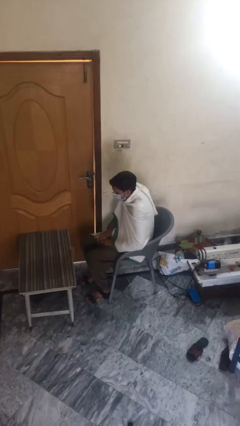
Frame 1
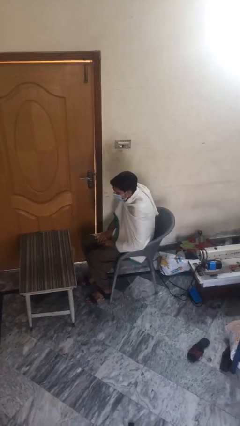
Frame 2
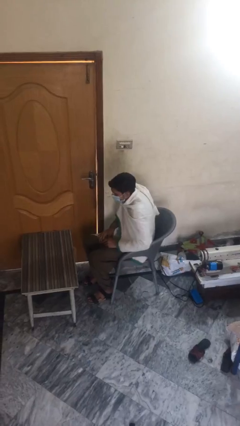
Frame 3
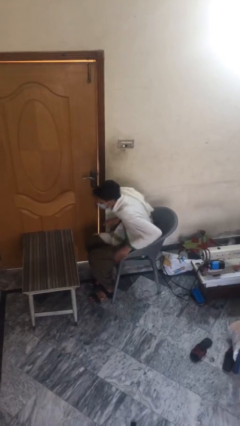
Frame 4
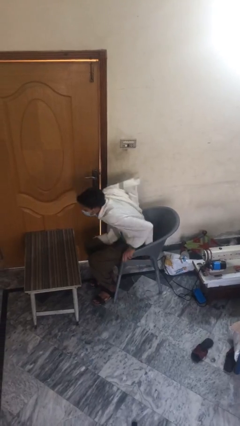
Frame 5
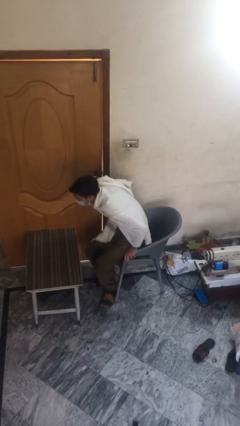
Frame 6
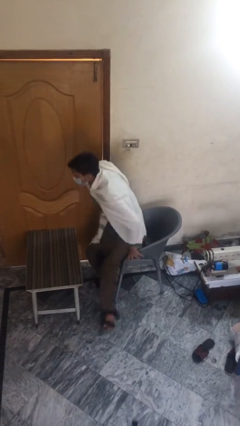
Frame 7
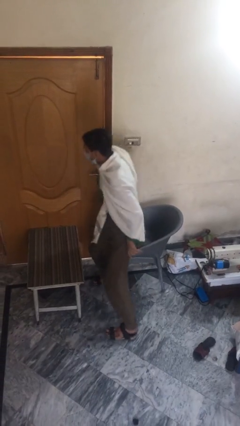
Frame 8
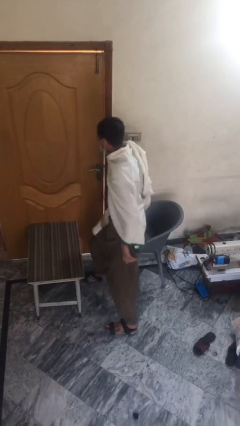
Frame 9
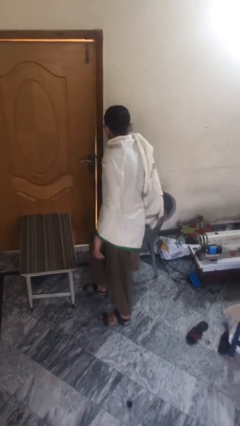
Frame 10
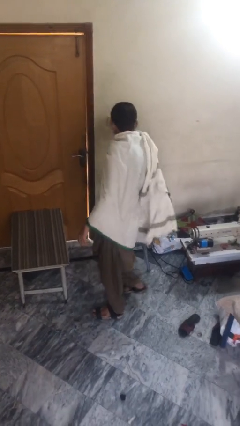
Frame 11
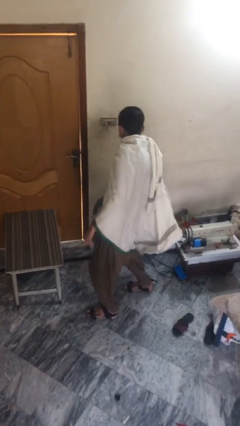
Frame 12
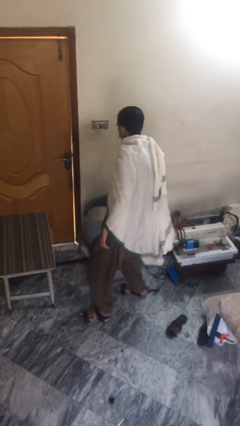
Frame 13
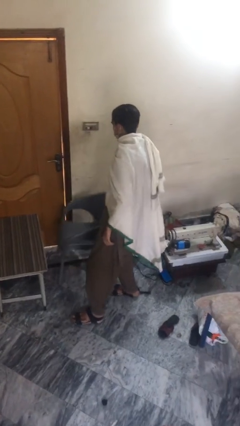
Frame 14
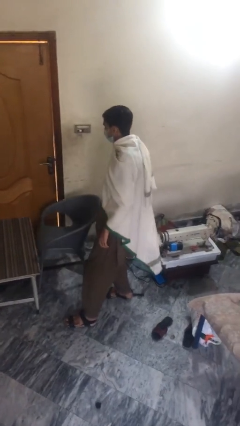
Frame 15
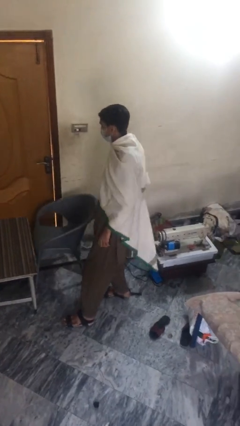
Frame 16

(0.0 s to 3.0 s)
person stands up

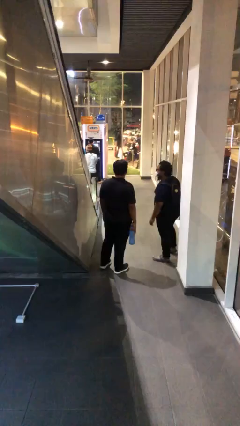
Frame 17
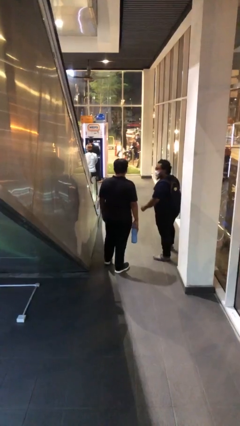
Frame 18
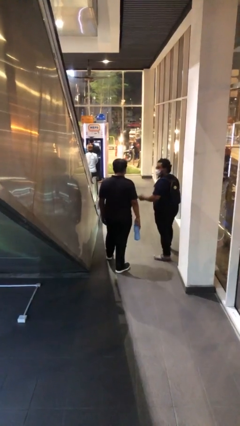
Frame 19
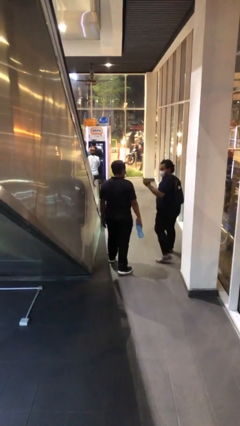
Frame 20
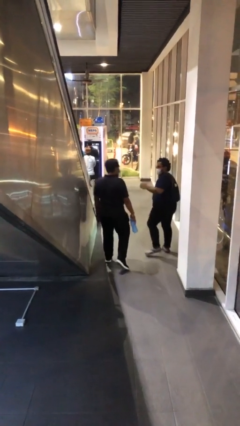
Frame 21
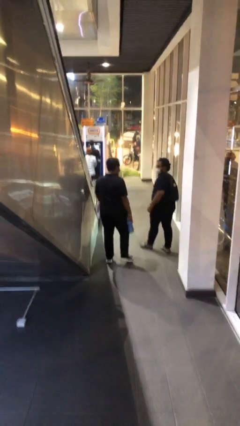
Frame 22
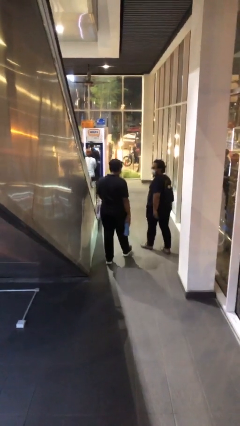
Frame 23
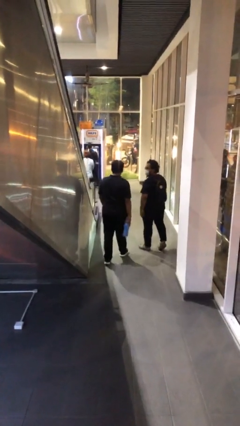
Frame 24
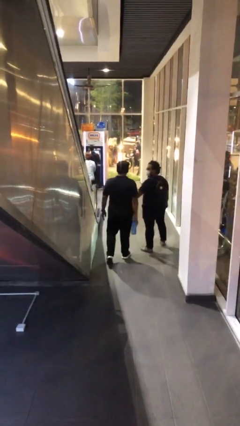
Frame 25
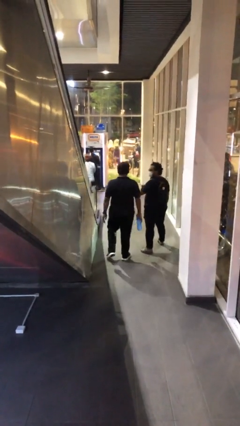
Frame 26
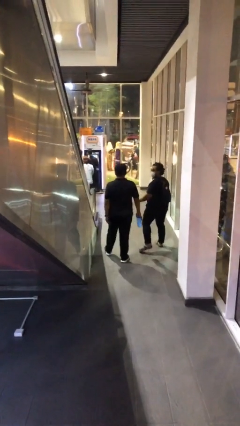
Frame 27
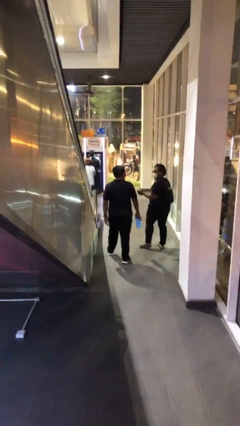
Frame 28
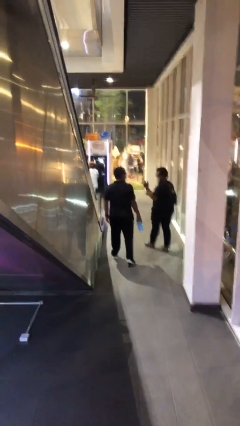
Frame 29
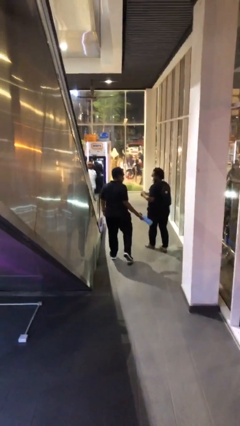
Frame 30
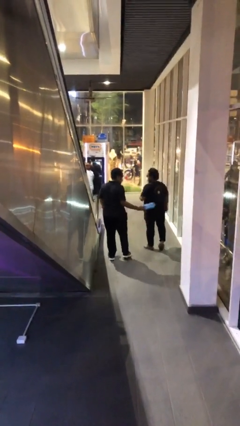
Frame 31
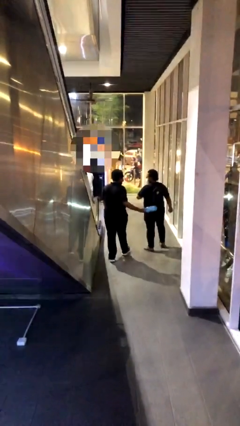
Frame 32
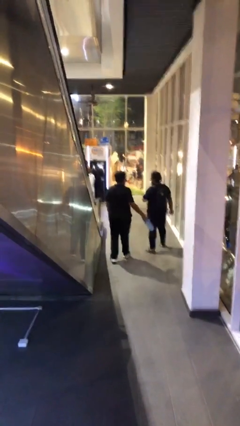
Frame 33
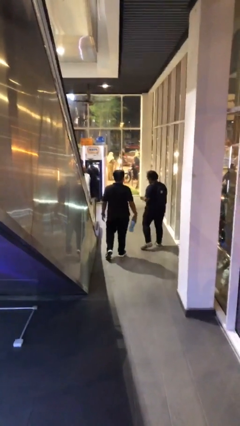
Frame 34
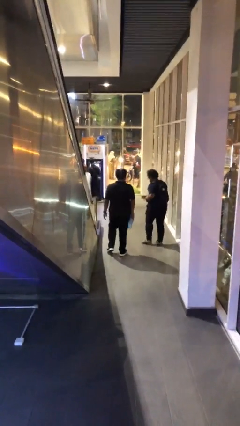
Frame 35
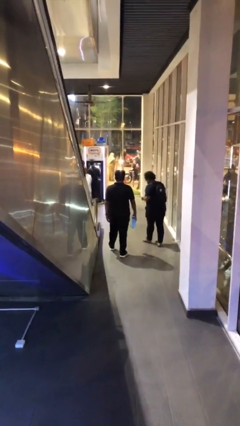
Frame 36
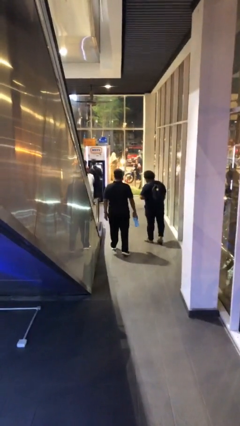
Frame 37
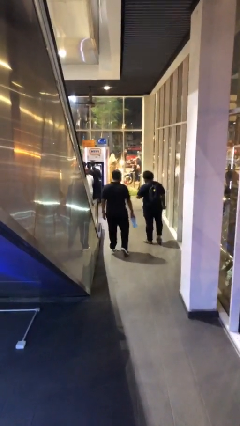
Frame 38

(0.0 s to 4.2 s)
person talks to person

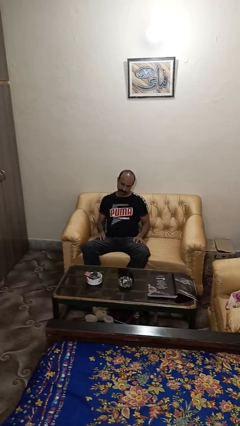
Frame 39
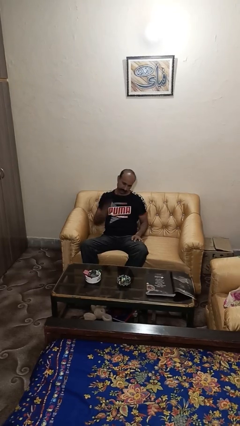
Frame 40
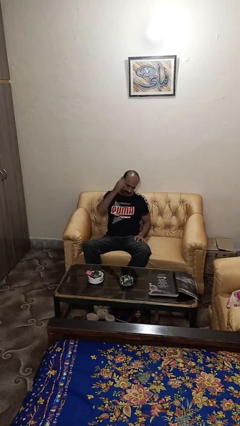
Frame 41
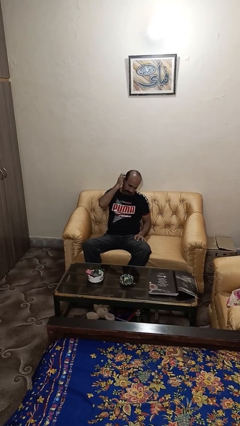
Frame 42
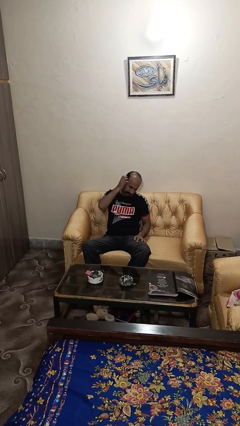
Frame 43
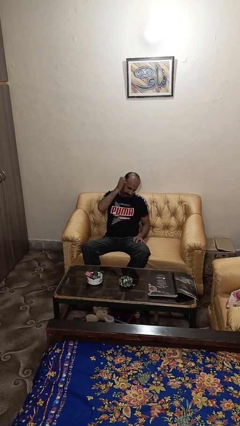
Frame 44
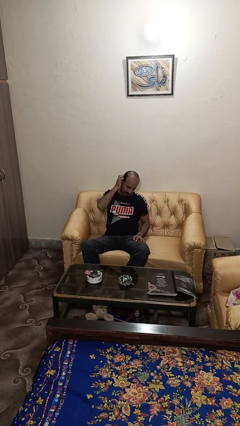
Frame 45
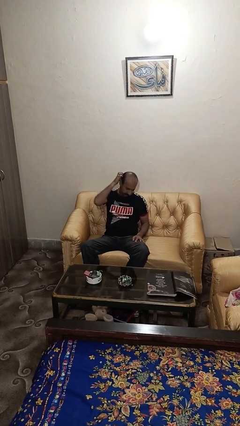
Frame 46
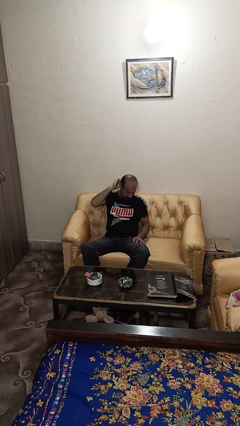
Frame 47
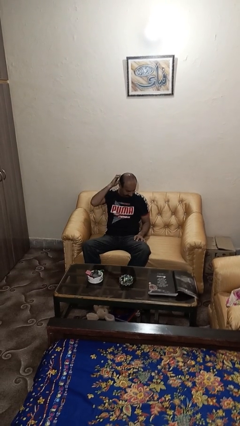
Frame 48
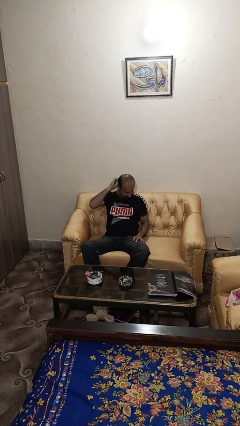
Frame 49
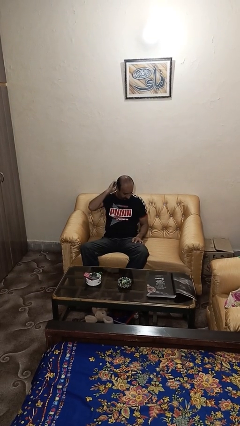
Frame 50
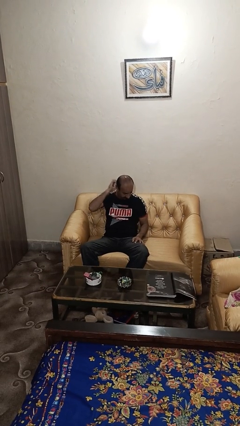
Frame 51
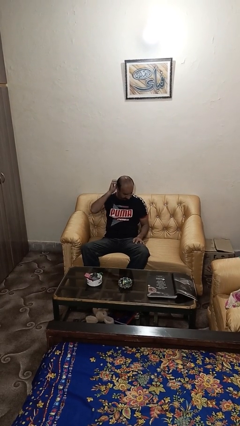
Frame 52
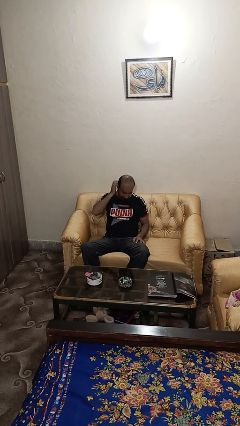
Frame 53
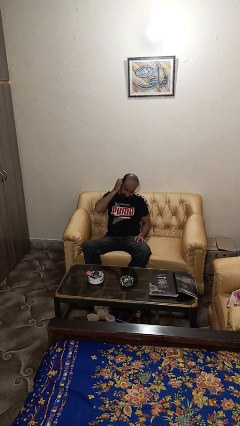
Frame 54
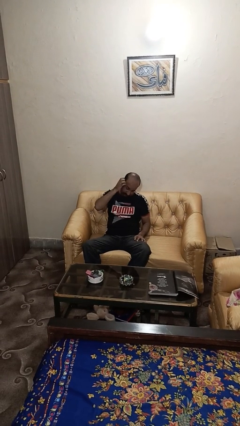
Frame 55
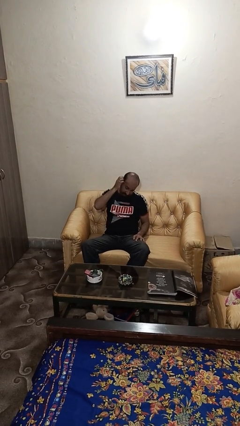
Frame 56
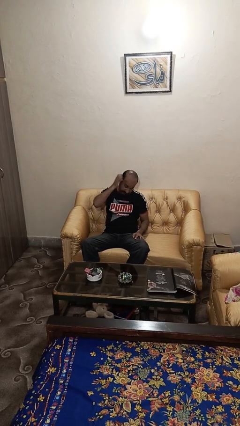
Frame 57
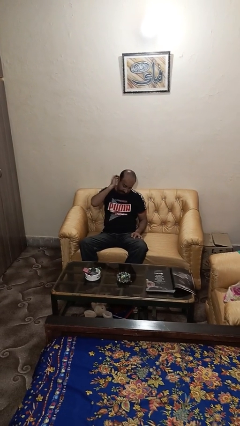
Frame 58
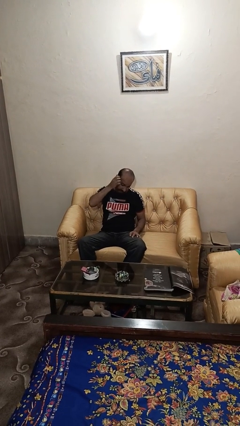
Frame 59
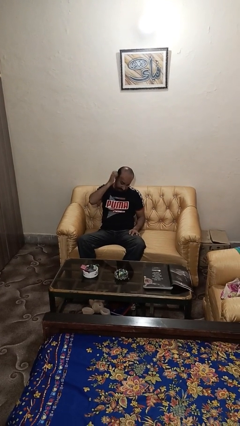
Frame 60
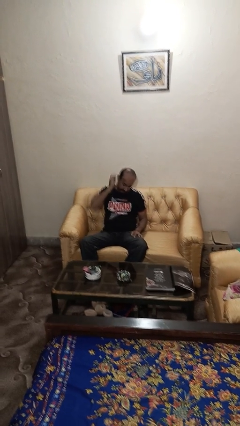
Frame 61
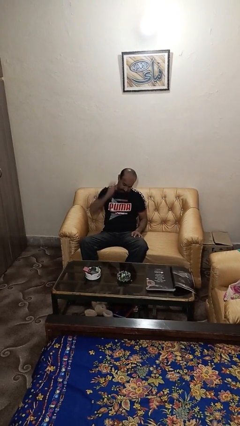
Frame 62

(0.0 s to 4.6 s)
person strokes hair

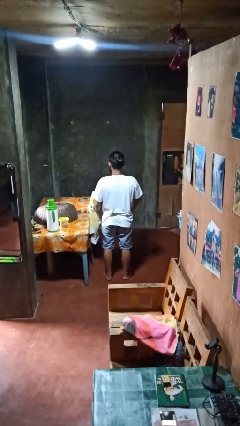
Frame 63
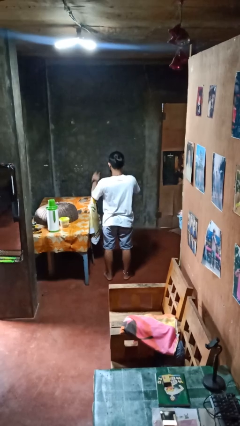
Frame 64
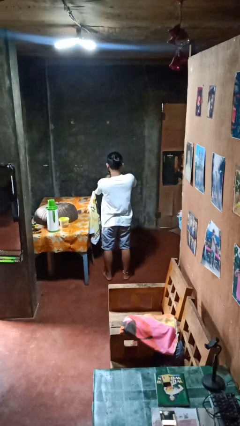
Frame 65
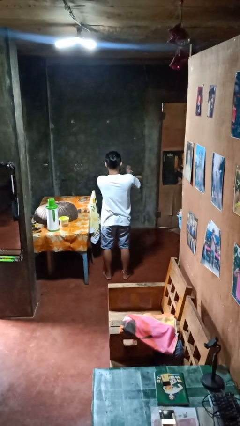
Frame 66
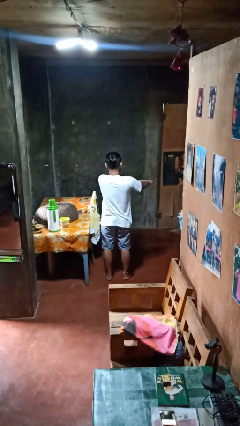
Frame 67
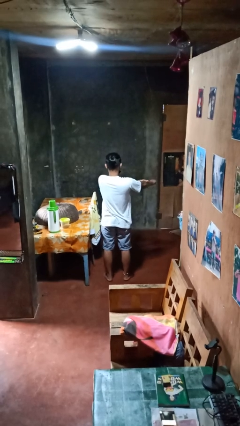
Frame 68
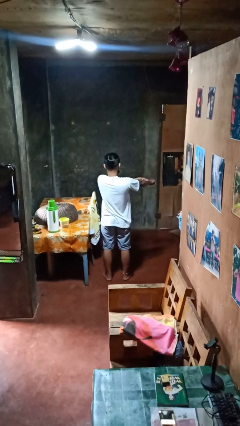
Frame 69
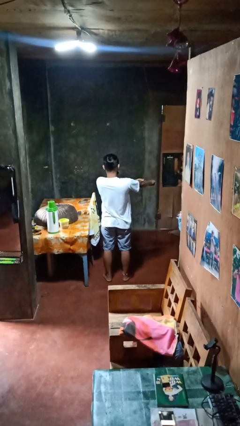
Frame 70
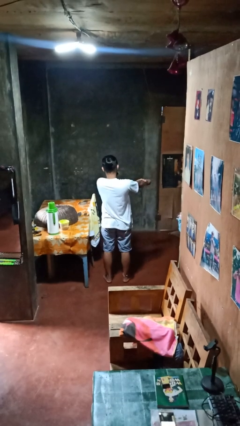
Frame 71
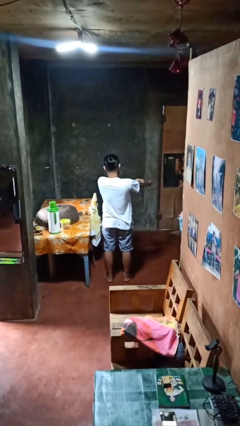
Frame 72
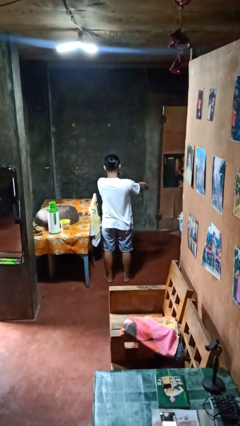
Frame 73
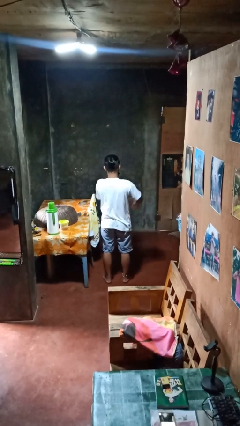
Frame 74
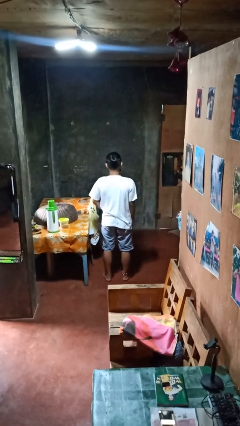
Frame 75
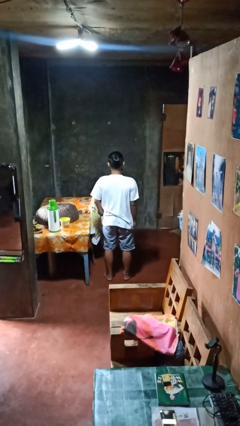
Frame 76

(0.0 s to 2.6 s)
person swats bug

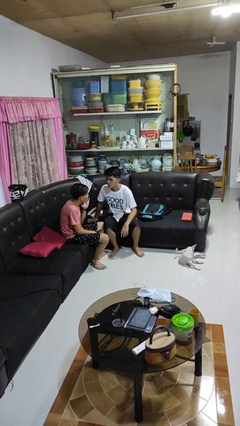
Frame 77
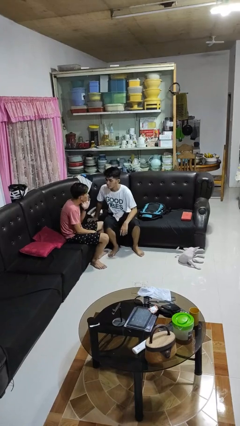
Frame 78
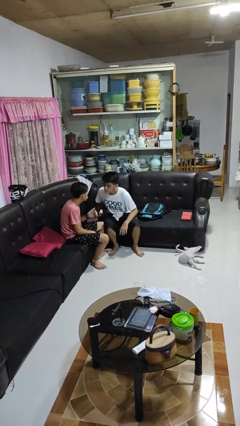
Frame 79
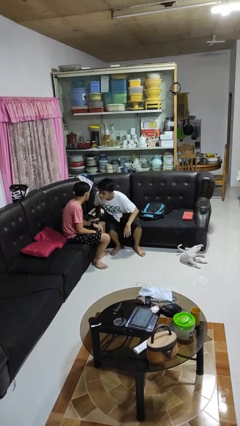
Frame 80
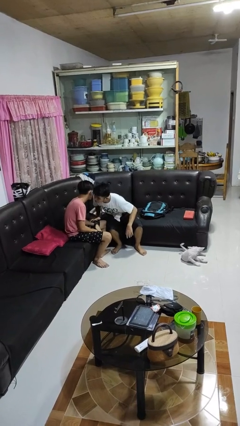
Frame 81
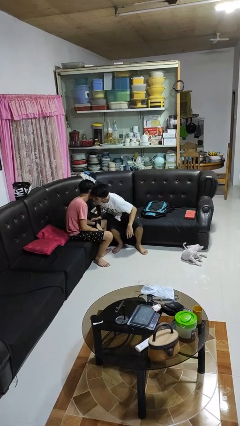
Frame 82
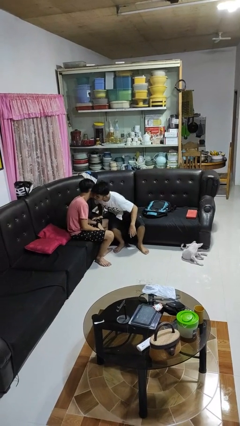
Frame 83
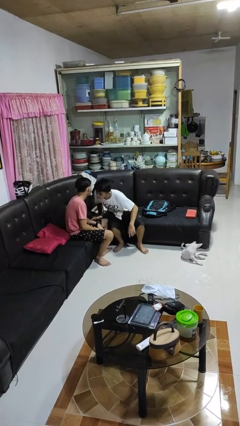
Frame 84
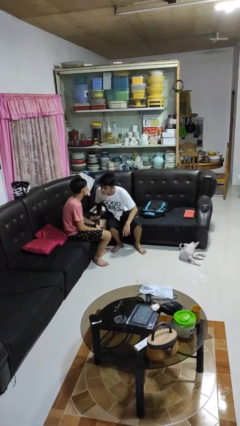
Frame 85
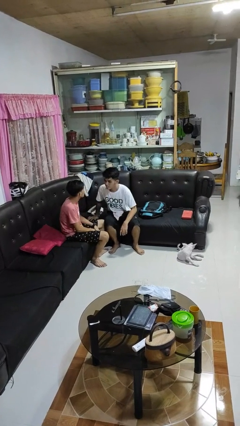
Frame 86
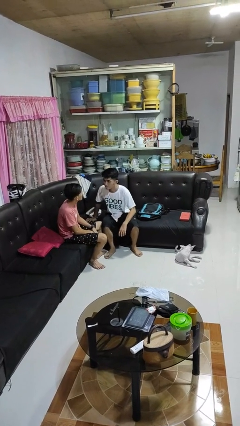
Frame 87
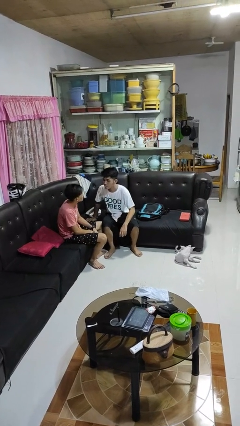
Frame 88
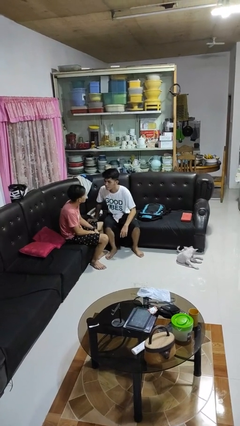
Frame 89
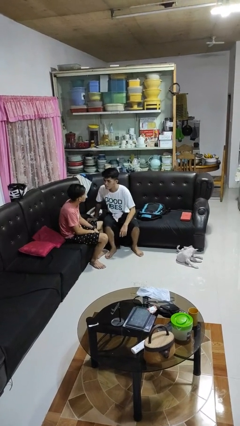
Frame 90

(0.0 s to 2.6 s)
person kisses cheek of person

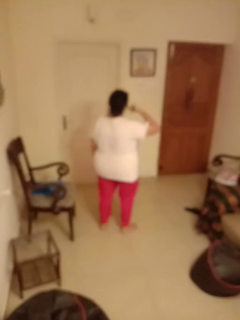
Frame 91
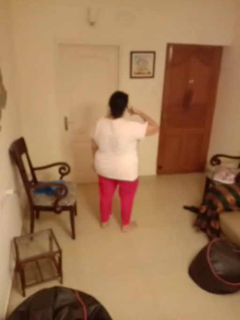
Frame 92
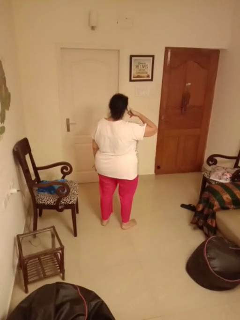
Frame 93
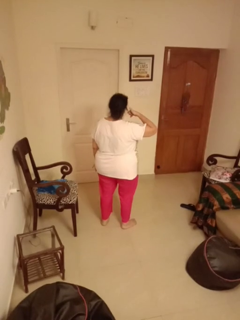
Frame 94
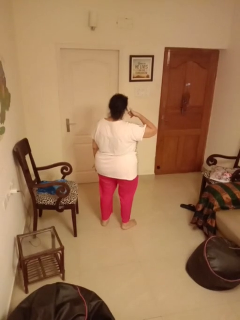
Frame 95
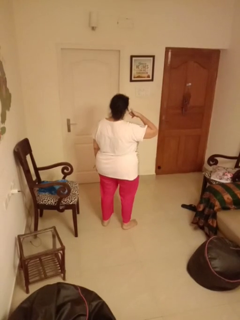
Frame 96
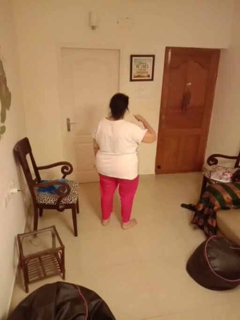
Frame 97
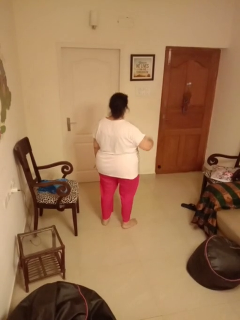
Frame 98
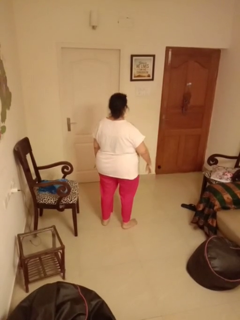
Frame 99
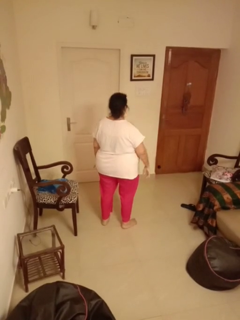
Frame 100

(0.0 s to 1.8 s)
person gestures call me
